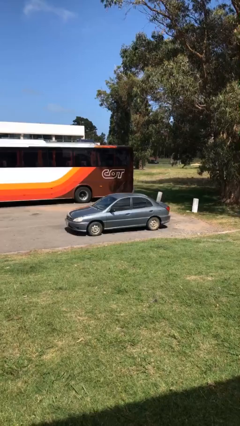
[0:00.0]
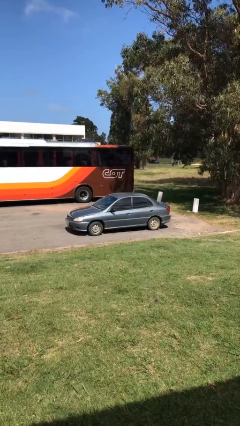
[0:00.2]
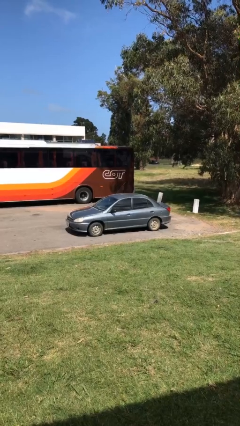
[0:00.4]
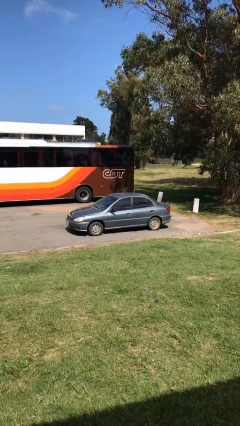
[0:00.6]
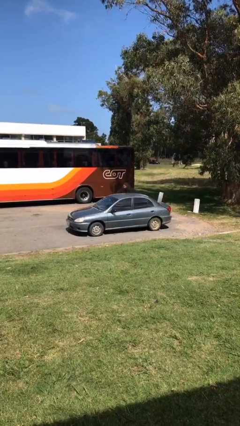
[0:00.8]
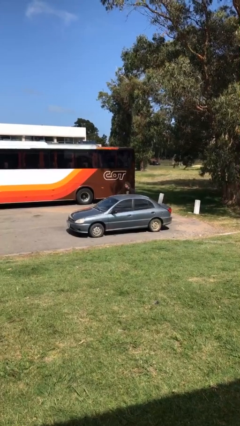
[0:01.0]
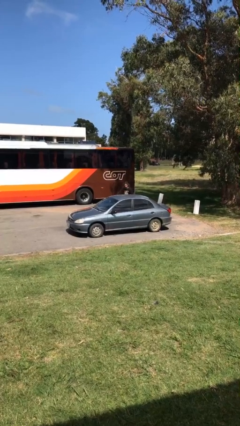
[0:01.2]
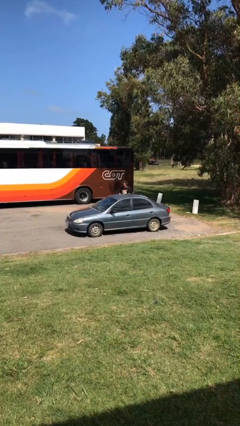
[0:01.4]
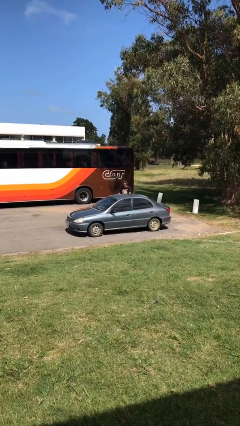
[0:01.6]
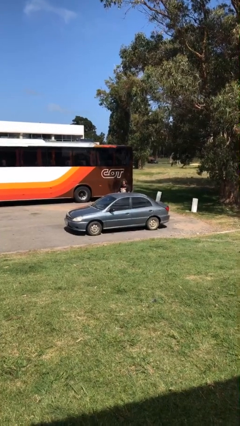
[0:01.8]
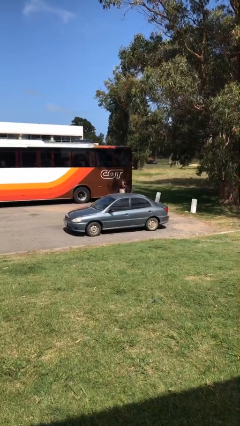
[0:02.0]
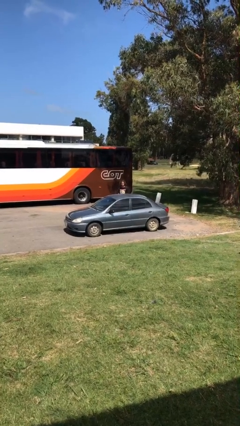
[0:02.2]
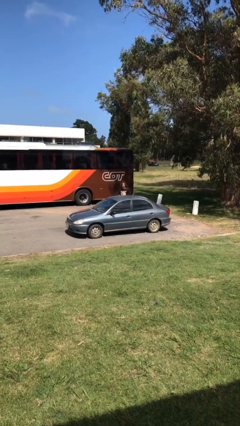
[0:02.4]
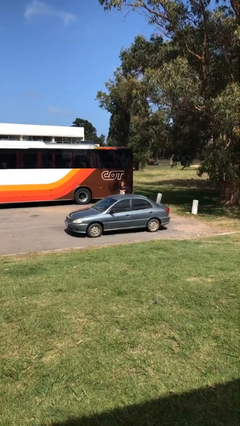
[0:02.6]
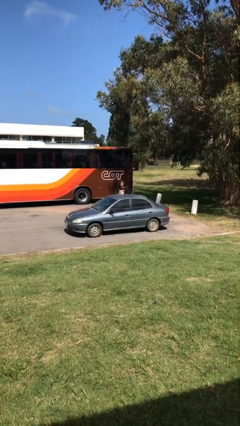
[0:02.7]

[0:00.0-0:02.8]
car drops off person

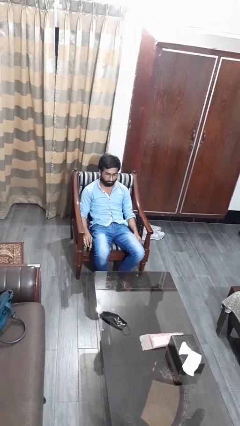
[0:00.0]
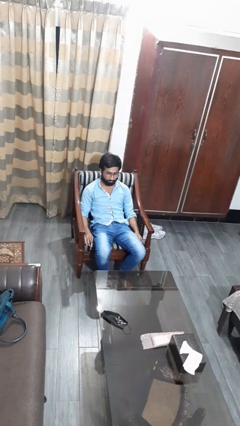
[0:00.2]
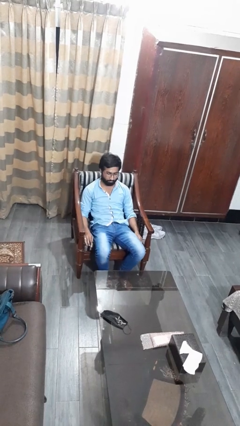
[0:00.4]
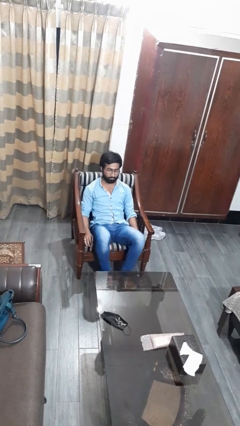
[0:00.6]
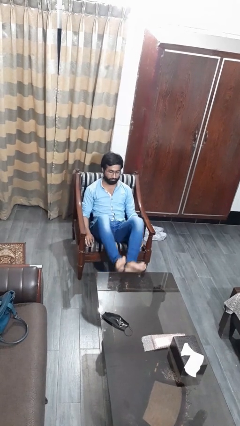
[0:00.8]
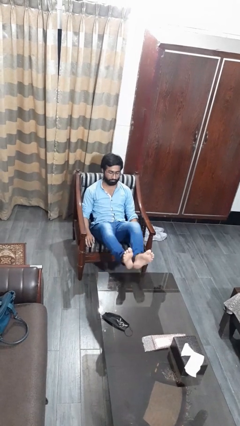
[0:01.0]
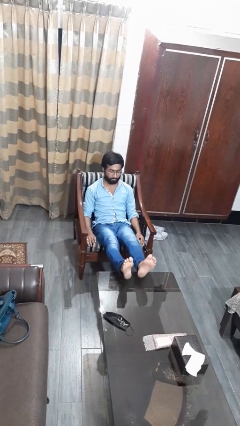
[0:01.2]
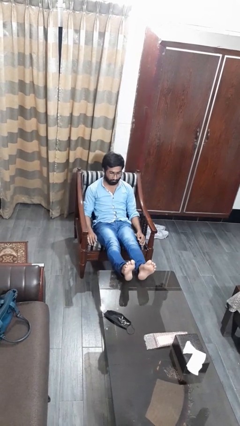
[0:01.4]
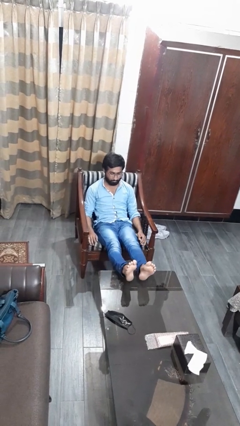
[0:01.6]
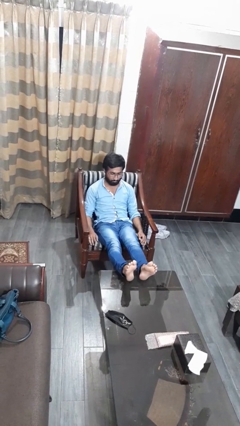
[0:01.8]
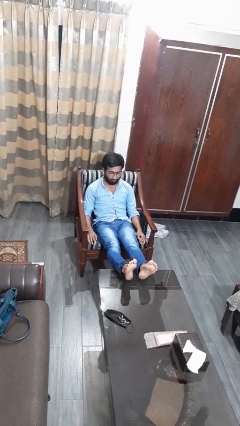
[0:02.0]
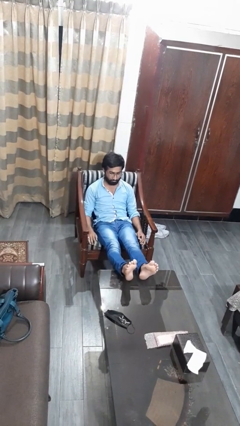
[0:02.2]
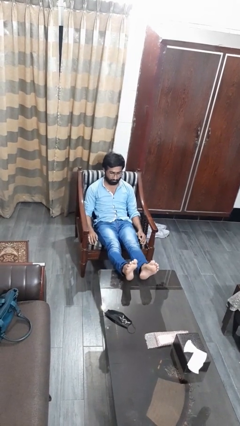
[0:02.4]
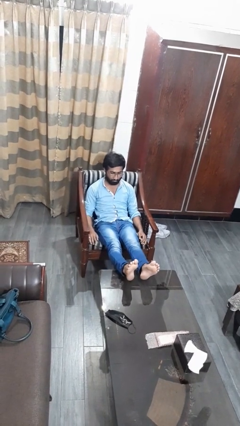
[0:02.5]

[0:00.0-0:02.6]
person puts feet up

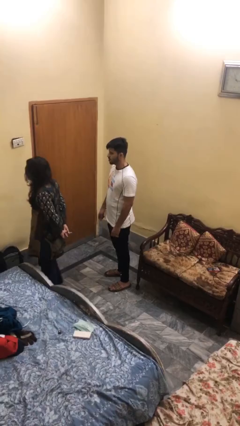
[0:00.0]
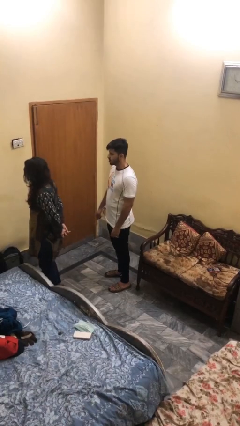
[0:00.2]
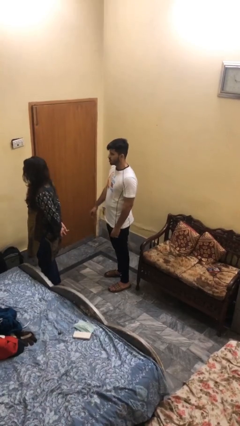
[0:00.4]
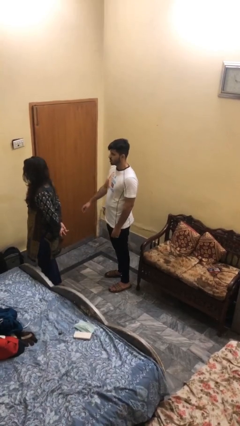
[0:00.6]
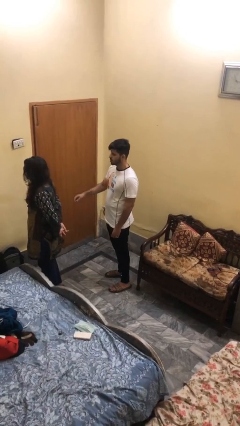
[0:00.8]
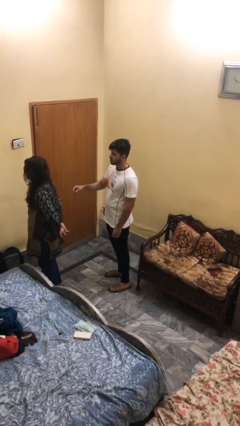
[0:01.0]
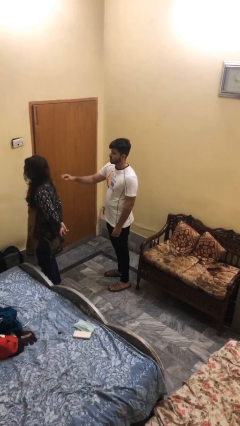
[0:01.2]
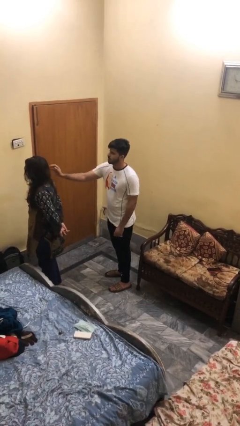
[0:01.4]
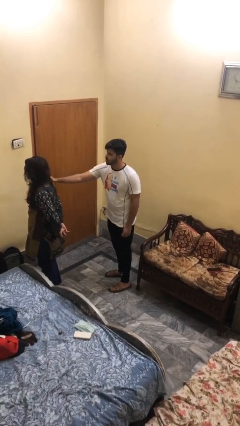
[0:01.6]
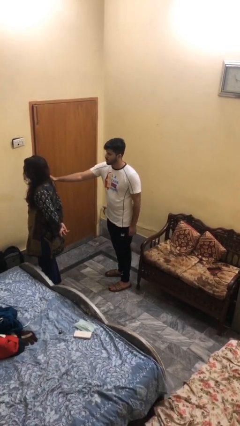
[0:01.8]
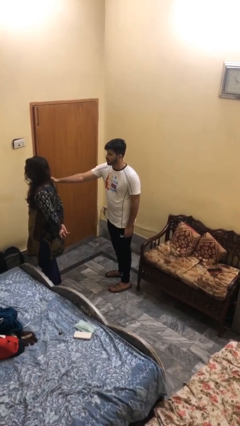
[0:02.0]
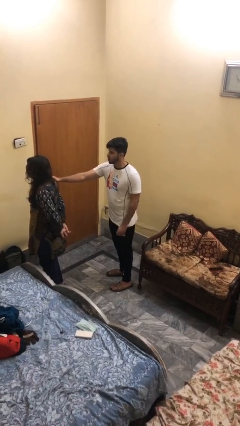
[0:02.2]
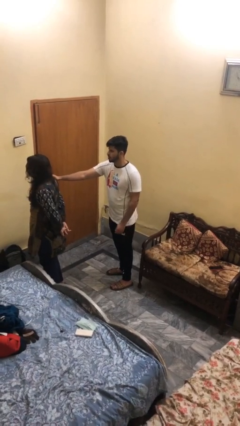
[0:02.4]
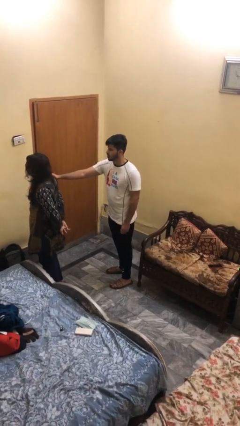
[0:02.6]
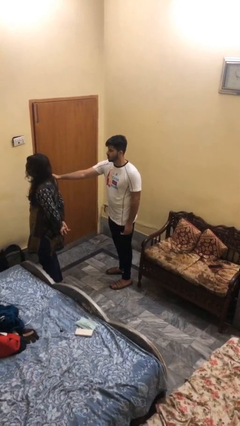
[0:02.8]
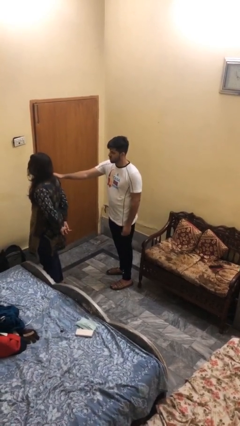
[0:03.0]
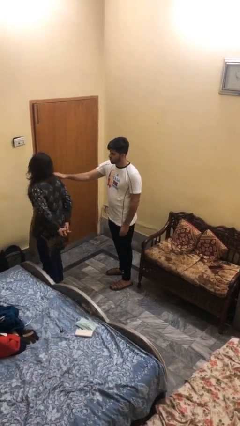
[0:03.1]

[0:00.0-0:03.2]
person grabs person by shoulder

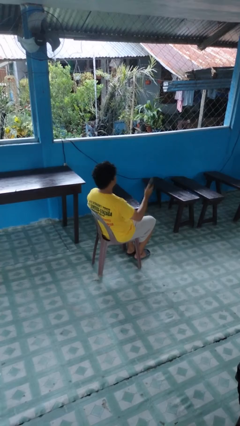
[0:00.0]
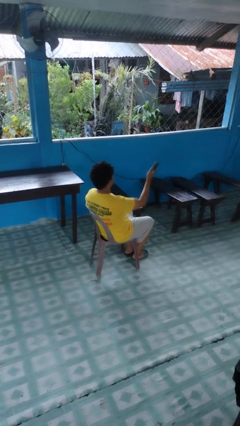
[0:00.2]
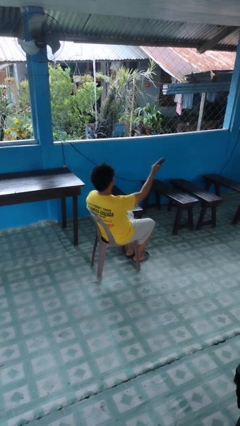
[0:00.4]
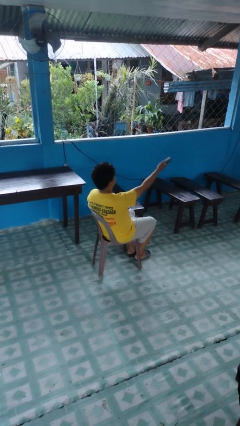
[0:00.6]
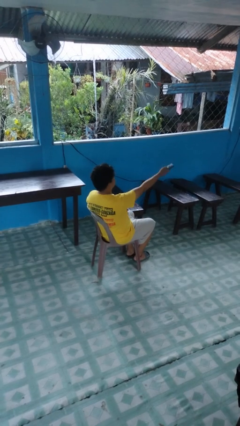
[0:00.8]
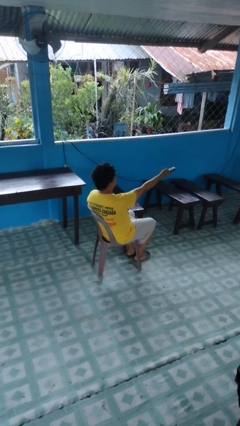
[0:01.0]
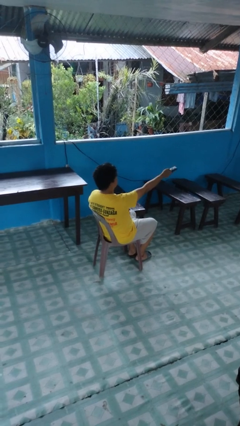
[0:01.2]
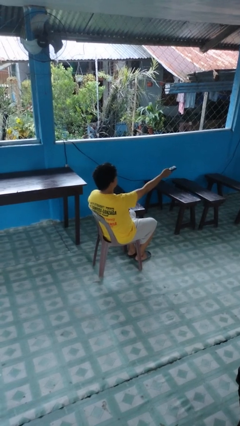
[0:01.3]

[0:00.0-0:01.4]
person uses television remote

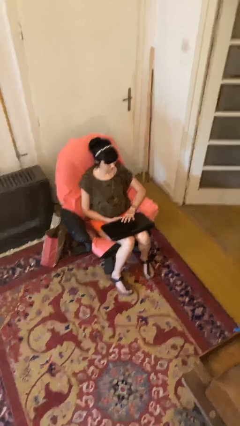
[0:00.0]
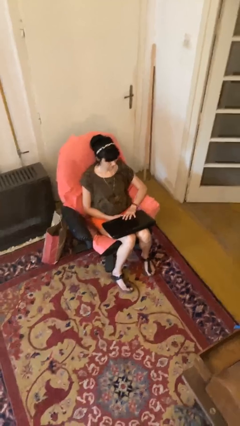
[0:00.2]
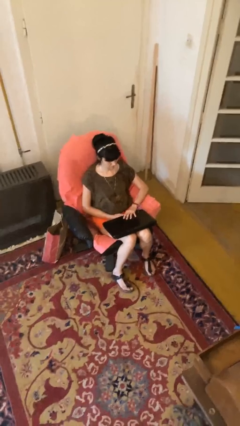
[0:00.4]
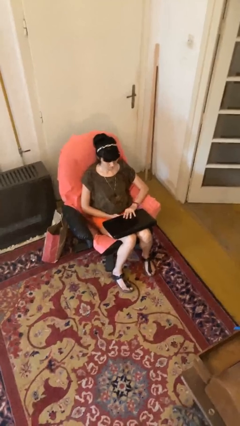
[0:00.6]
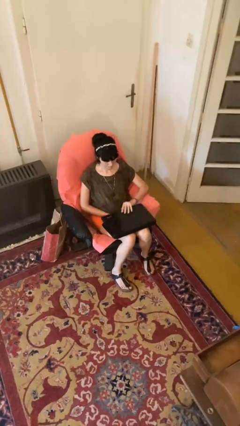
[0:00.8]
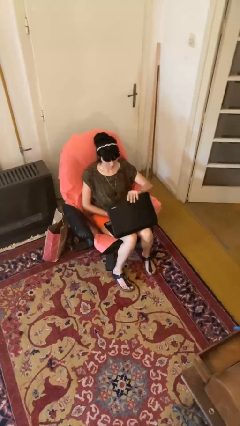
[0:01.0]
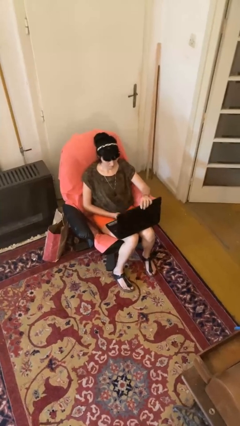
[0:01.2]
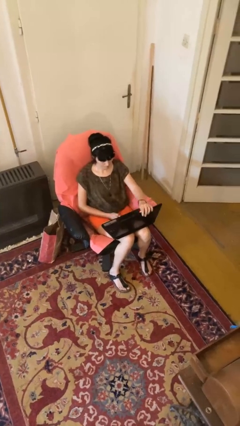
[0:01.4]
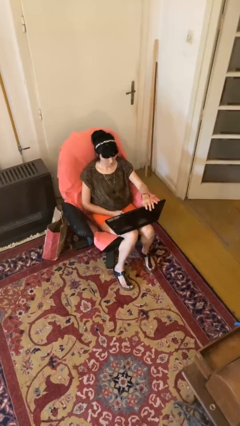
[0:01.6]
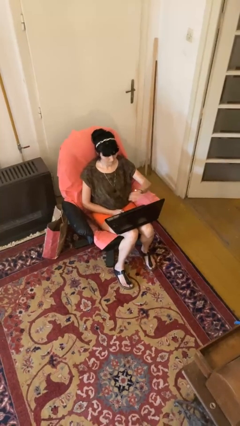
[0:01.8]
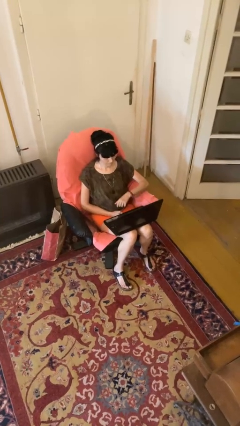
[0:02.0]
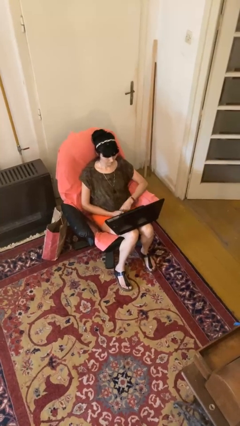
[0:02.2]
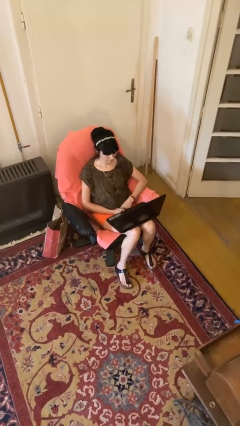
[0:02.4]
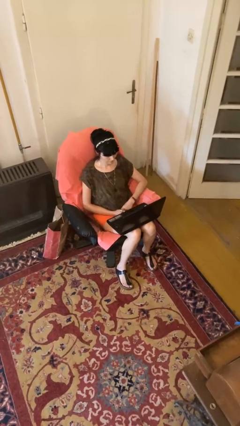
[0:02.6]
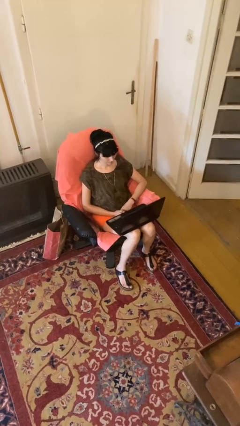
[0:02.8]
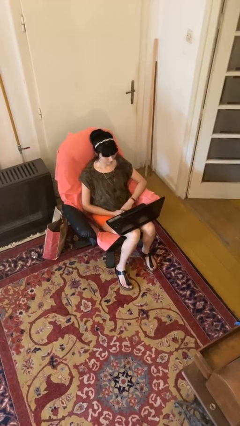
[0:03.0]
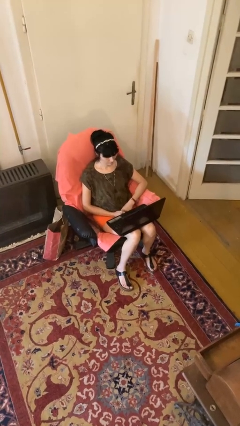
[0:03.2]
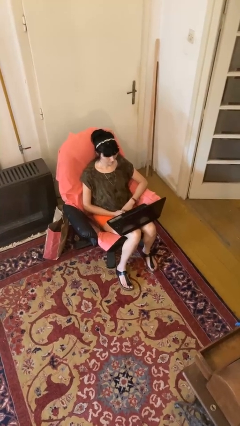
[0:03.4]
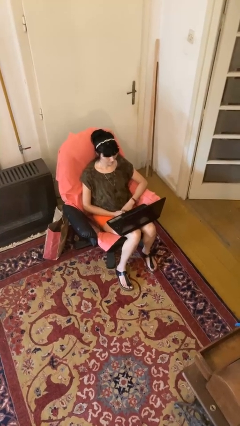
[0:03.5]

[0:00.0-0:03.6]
person opens laptop

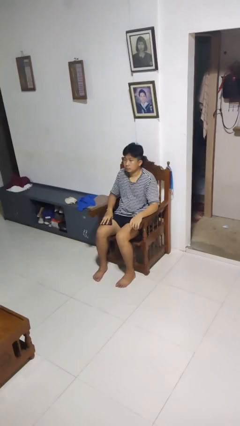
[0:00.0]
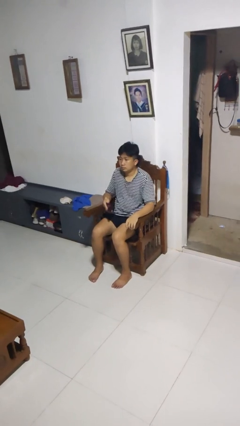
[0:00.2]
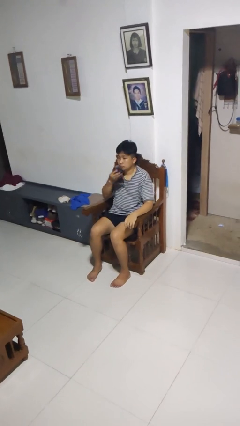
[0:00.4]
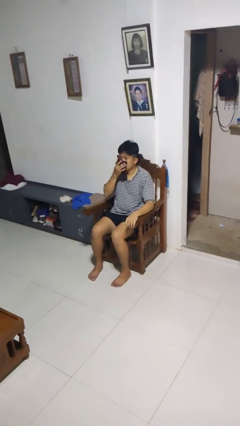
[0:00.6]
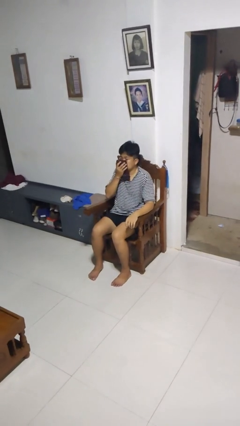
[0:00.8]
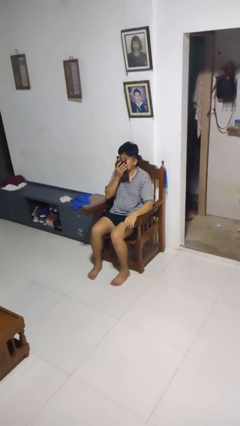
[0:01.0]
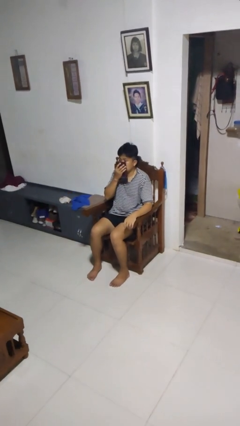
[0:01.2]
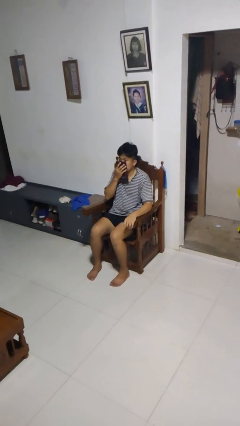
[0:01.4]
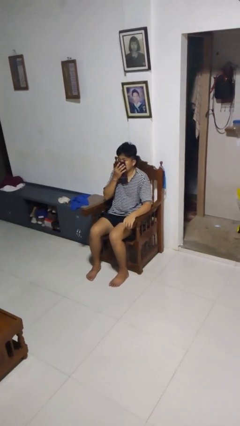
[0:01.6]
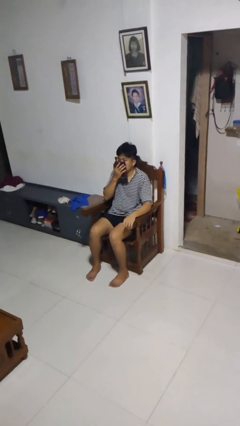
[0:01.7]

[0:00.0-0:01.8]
person blows nose

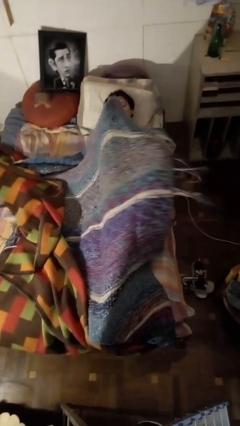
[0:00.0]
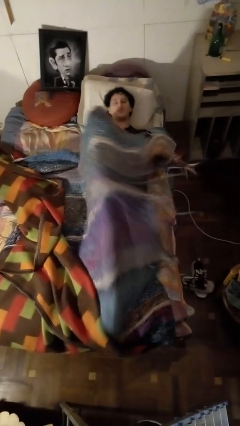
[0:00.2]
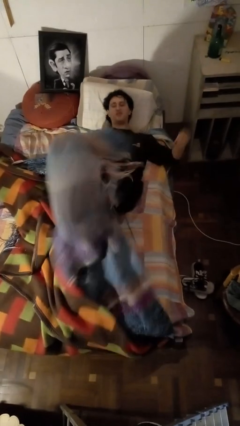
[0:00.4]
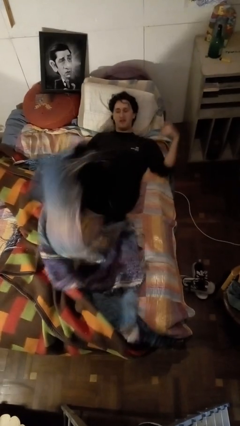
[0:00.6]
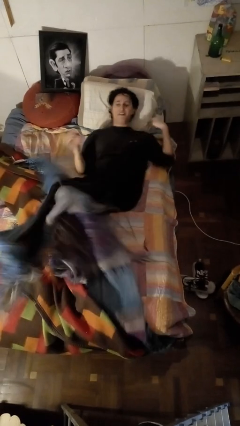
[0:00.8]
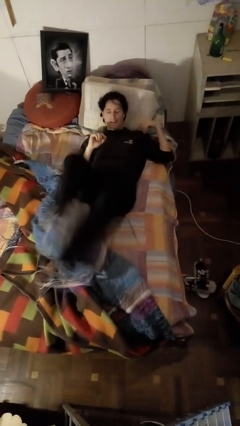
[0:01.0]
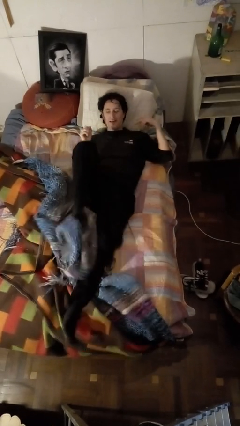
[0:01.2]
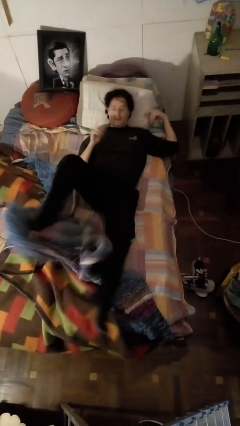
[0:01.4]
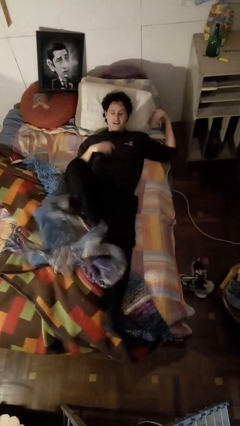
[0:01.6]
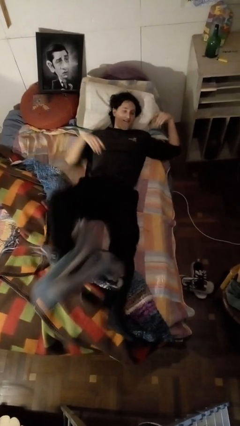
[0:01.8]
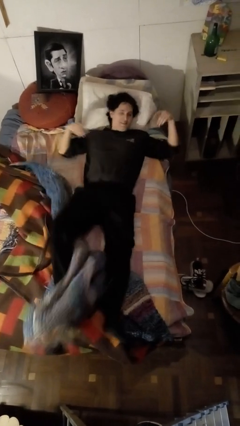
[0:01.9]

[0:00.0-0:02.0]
person uncovers with bedsheets
